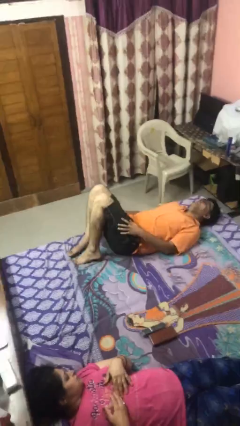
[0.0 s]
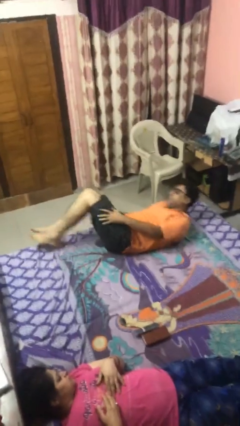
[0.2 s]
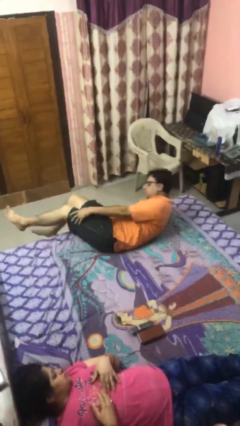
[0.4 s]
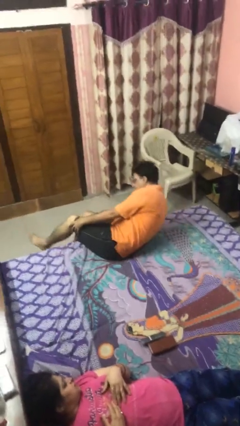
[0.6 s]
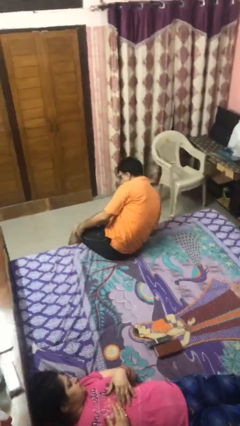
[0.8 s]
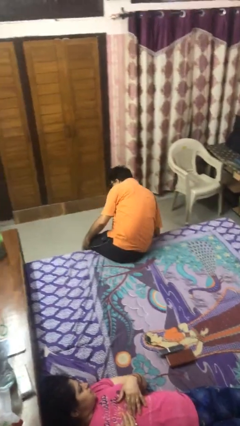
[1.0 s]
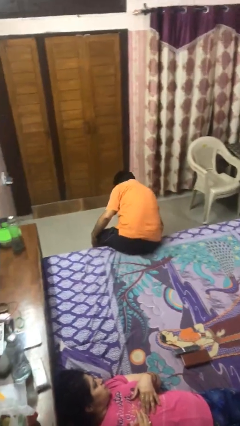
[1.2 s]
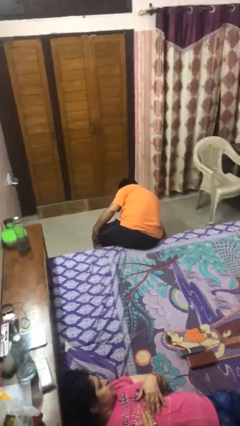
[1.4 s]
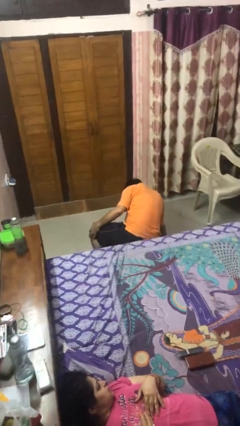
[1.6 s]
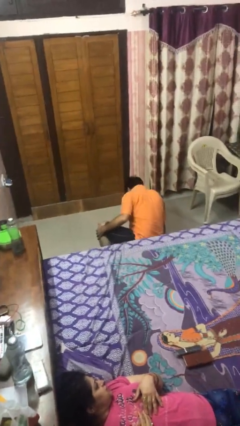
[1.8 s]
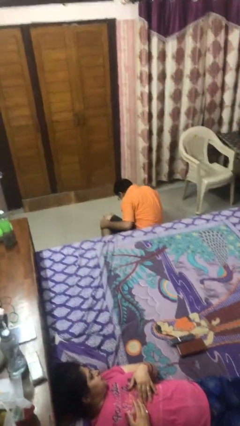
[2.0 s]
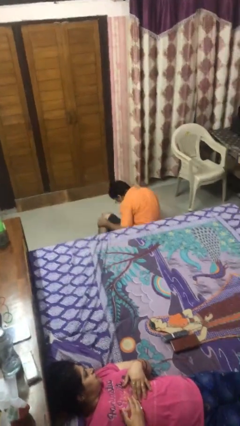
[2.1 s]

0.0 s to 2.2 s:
person falls from bed

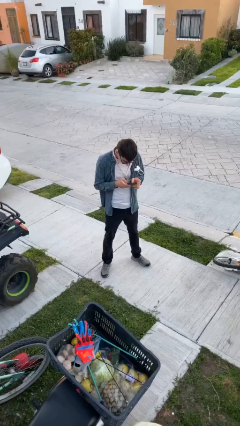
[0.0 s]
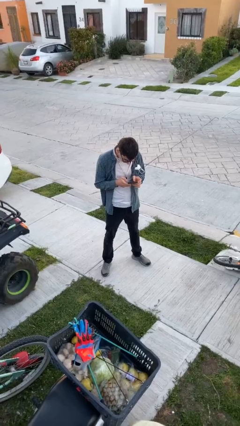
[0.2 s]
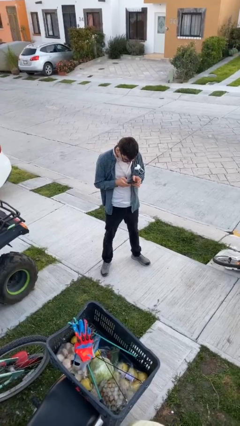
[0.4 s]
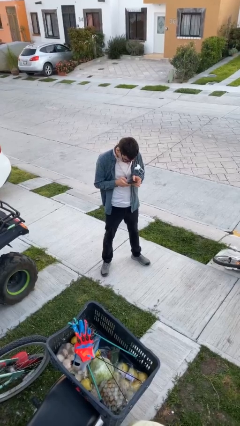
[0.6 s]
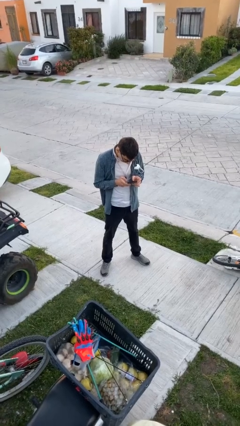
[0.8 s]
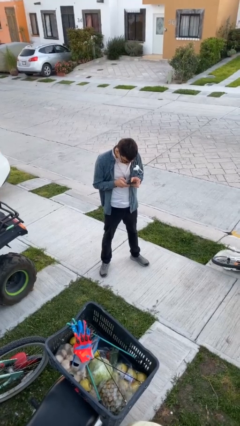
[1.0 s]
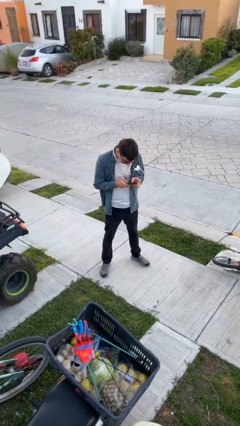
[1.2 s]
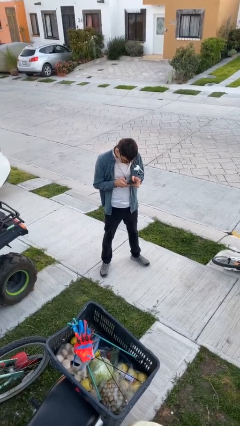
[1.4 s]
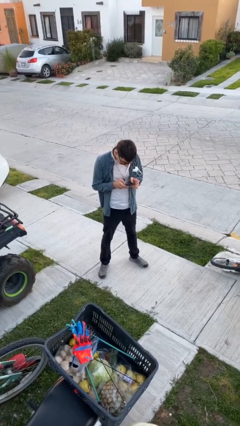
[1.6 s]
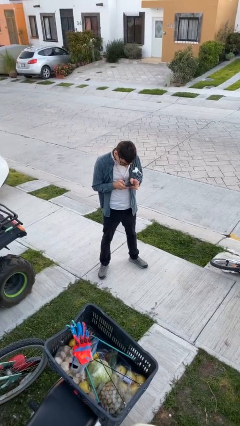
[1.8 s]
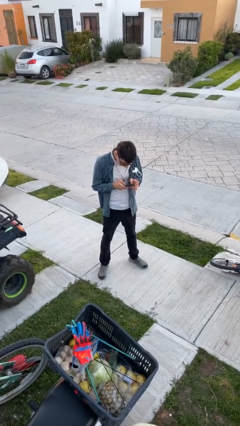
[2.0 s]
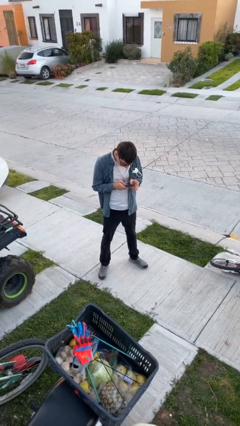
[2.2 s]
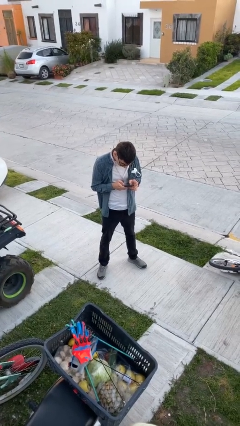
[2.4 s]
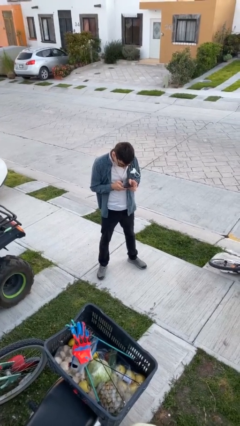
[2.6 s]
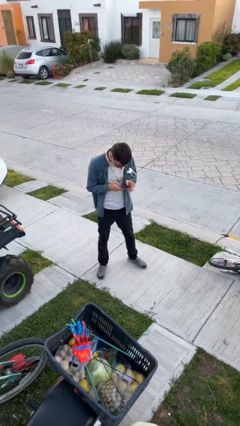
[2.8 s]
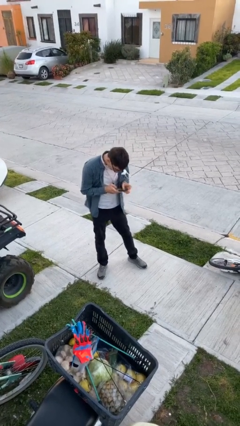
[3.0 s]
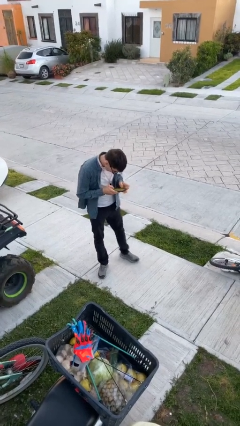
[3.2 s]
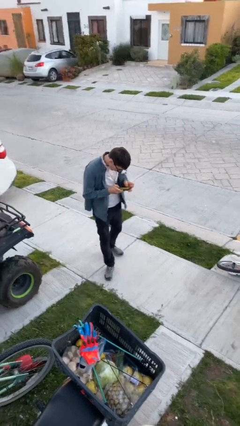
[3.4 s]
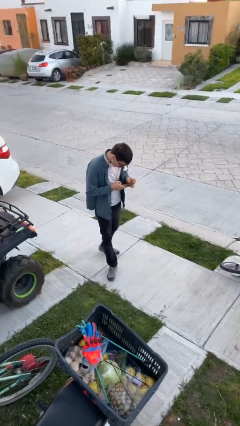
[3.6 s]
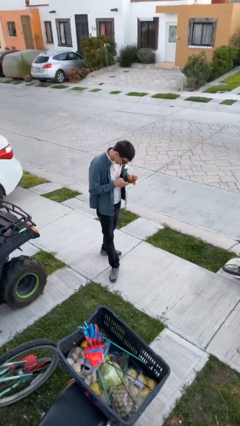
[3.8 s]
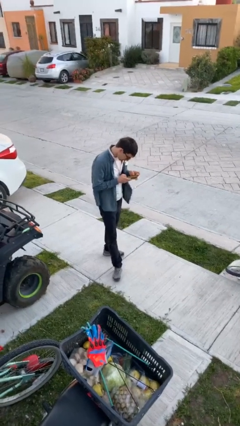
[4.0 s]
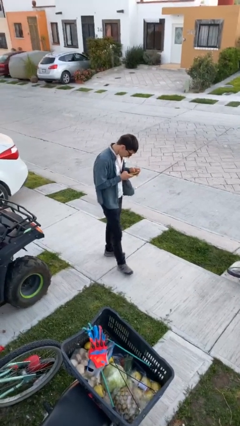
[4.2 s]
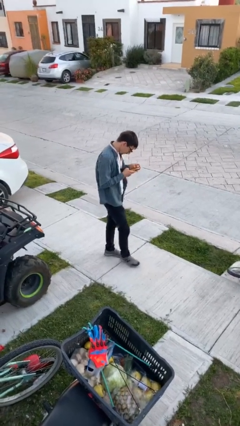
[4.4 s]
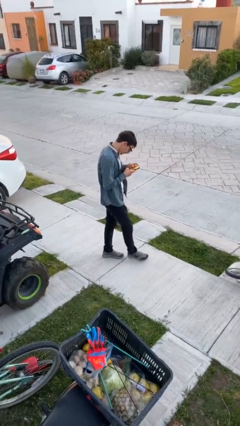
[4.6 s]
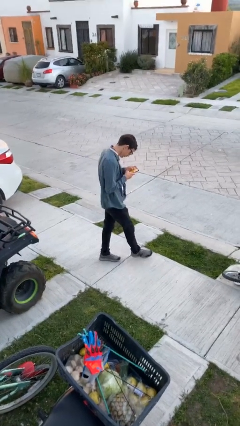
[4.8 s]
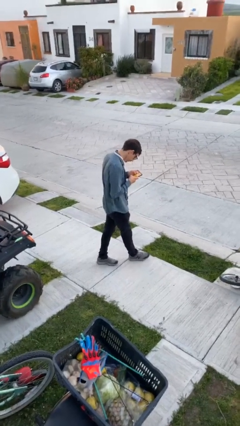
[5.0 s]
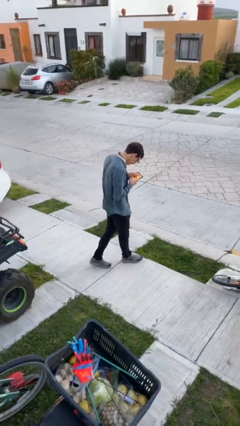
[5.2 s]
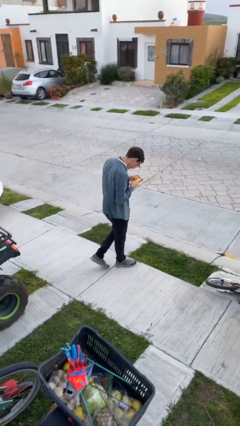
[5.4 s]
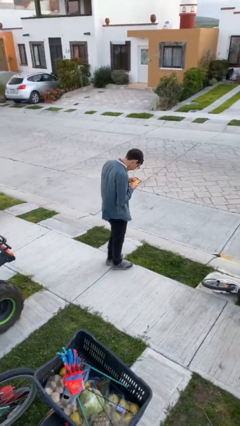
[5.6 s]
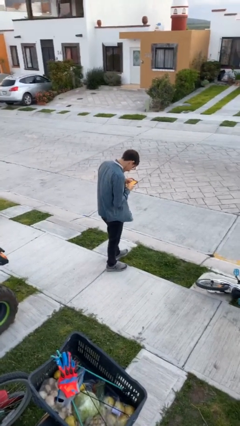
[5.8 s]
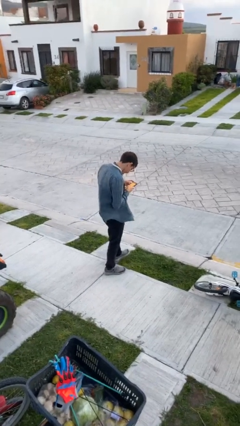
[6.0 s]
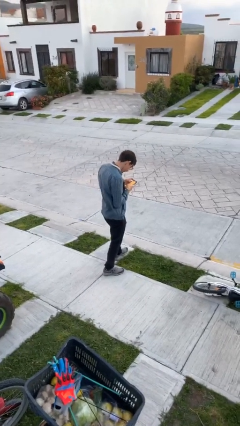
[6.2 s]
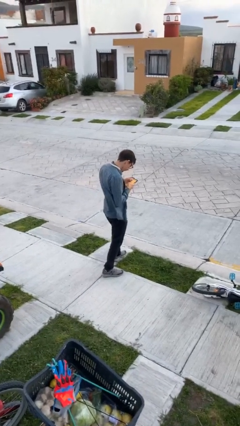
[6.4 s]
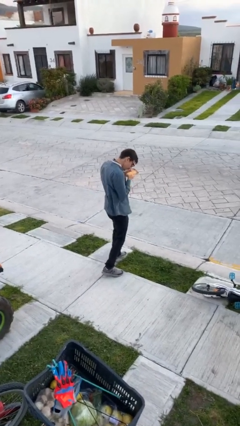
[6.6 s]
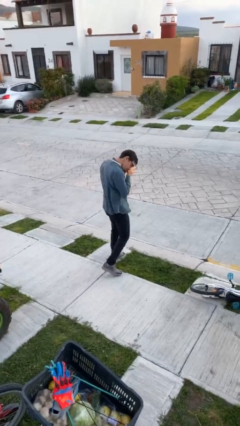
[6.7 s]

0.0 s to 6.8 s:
person texts on phone

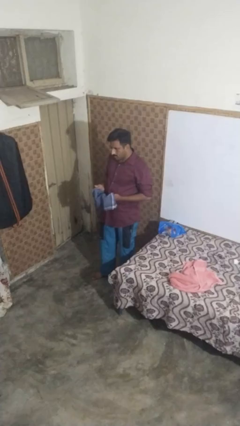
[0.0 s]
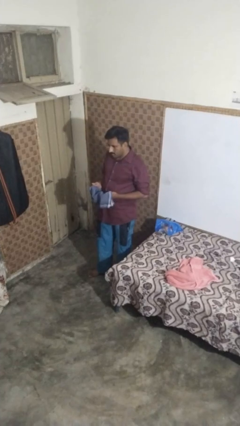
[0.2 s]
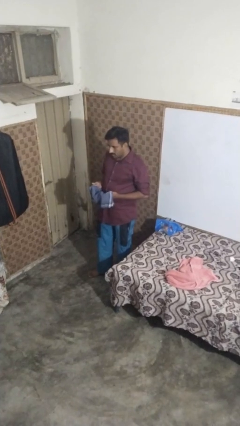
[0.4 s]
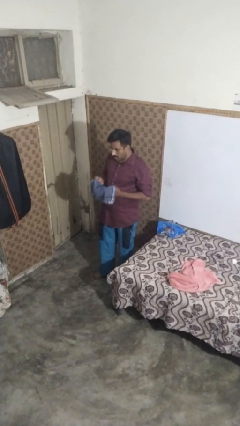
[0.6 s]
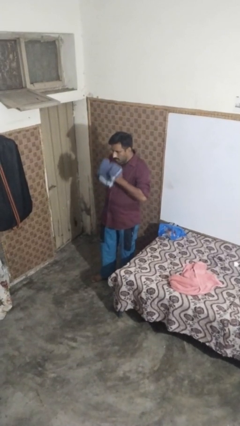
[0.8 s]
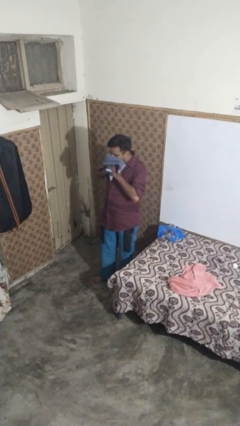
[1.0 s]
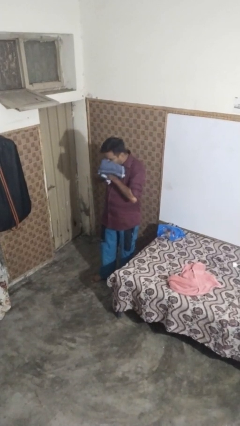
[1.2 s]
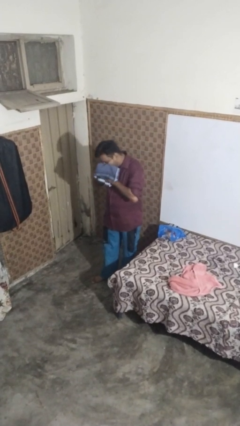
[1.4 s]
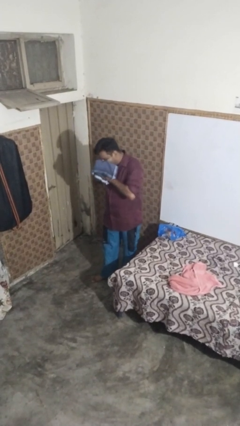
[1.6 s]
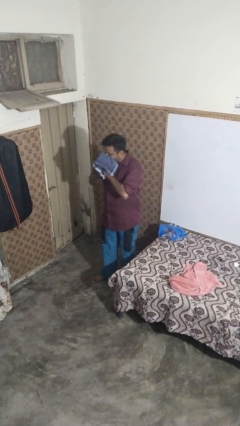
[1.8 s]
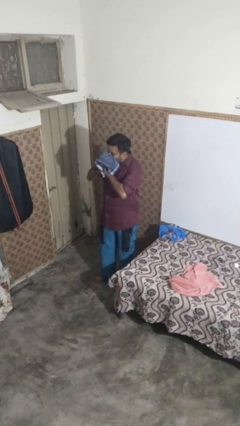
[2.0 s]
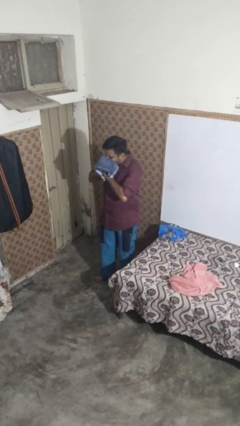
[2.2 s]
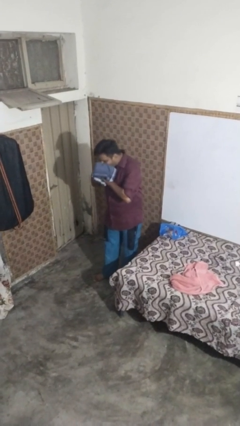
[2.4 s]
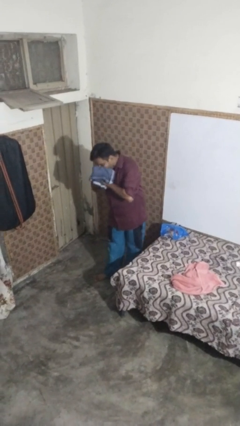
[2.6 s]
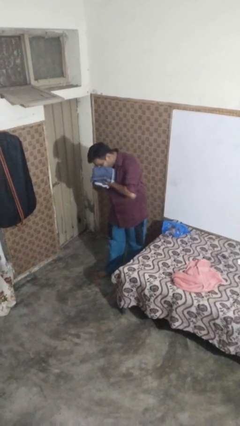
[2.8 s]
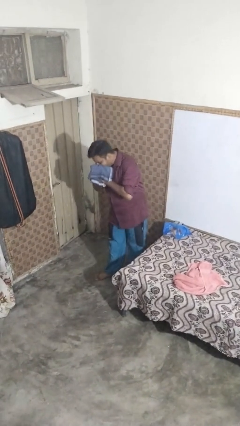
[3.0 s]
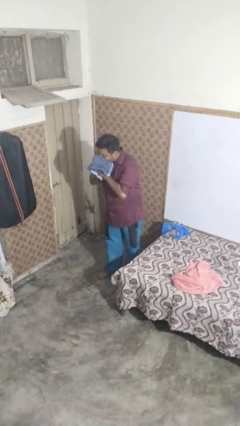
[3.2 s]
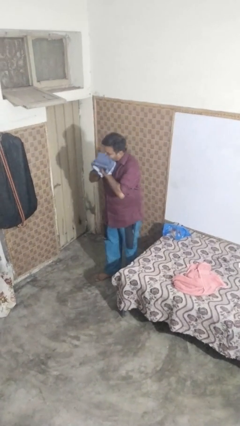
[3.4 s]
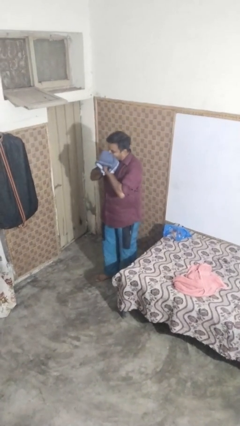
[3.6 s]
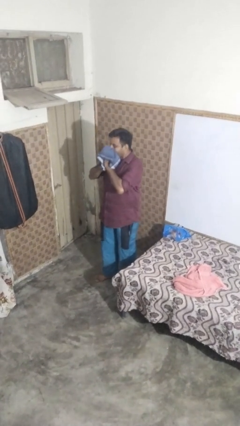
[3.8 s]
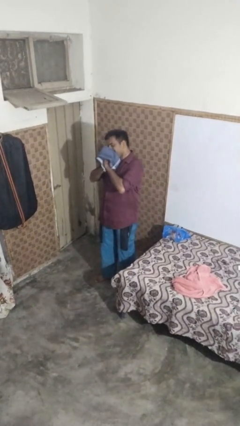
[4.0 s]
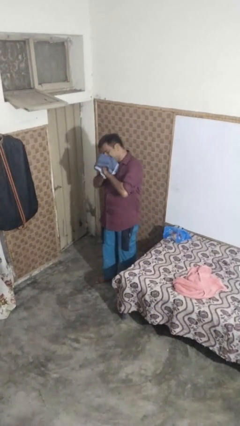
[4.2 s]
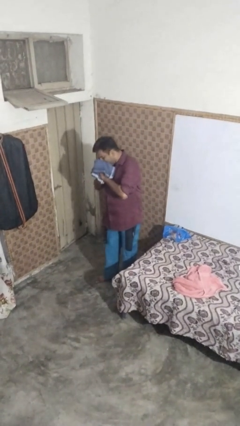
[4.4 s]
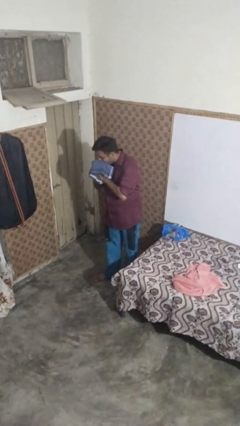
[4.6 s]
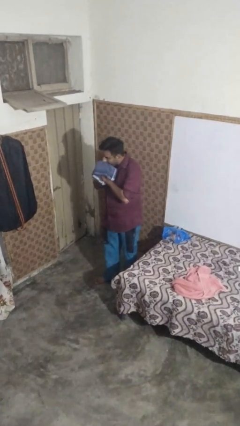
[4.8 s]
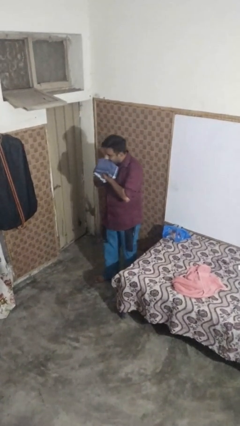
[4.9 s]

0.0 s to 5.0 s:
person blows nose

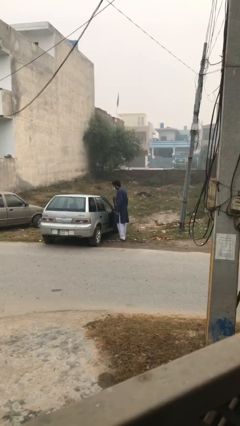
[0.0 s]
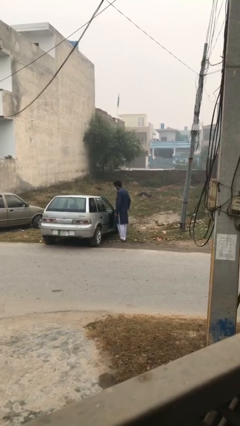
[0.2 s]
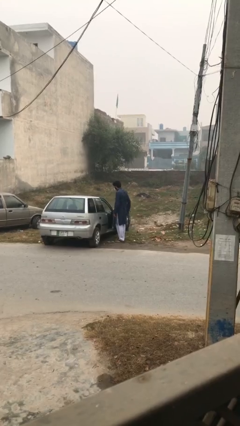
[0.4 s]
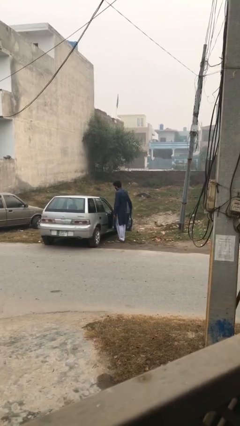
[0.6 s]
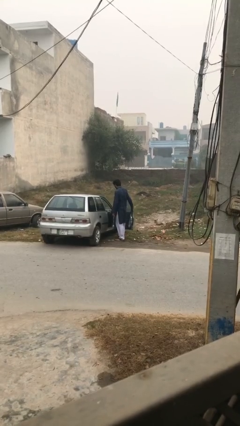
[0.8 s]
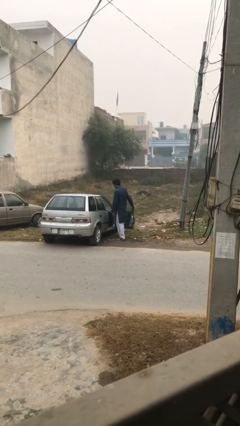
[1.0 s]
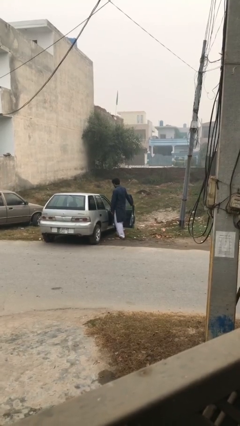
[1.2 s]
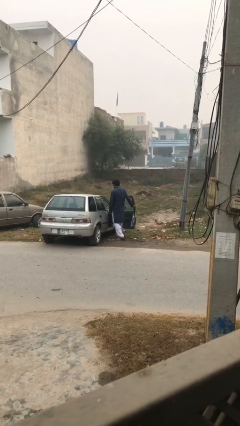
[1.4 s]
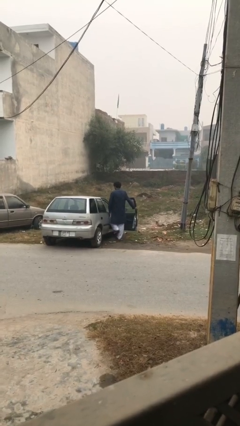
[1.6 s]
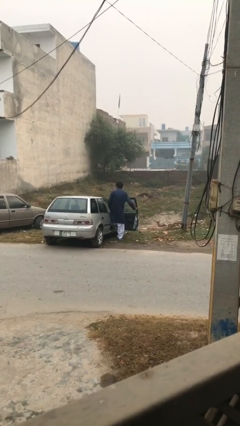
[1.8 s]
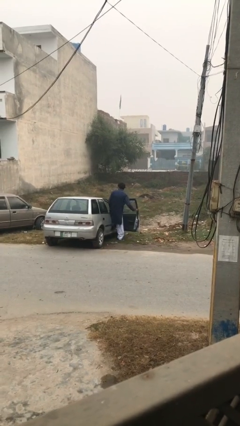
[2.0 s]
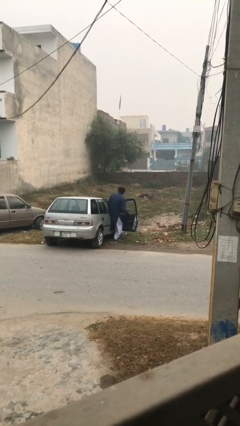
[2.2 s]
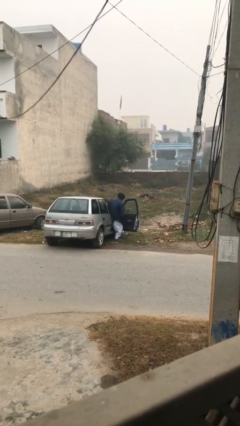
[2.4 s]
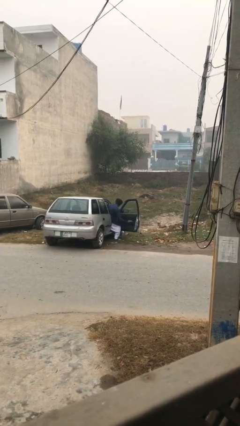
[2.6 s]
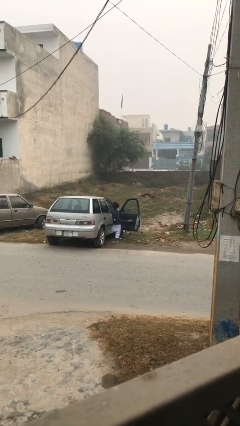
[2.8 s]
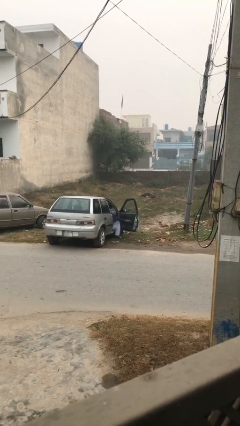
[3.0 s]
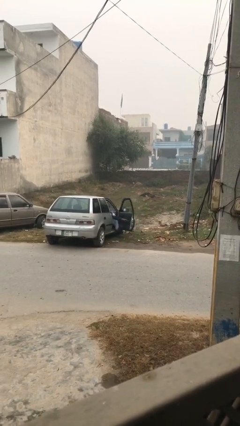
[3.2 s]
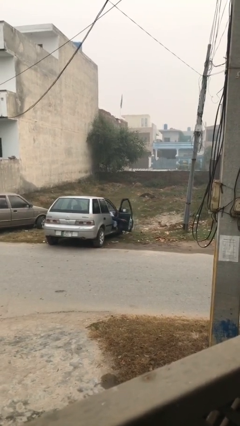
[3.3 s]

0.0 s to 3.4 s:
person enters car

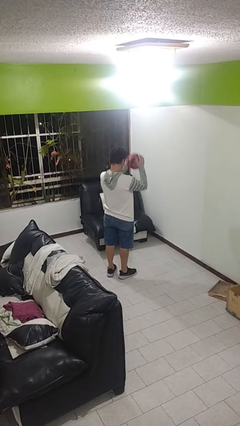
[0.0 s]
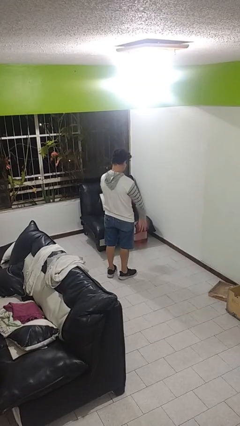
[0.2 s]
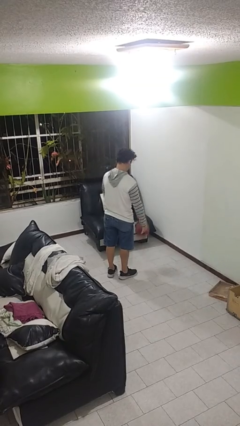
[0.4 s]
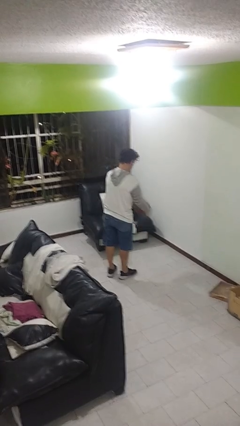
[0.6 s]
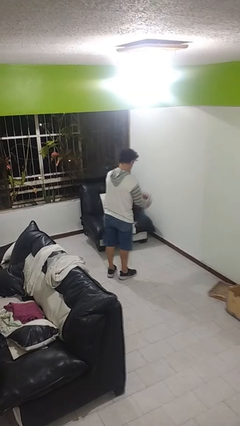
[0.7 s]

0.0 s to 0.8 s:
person bounces ball on floor
